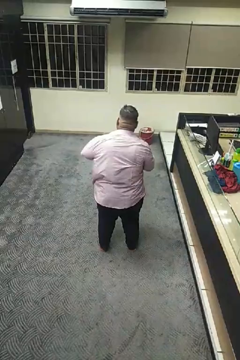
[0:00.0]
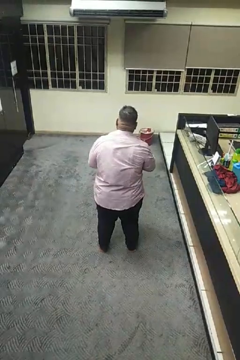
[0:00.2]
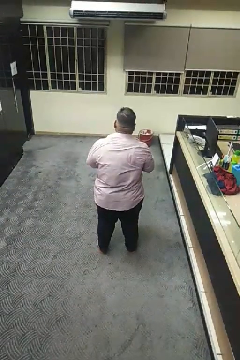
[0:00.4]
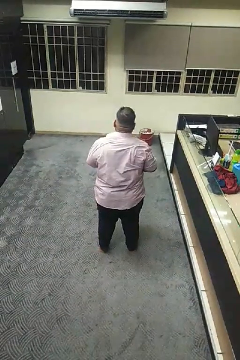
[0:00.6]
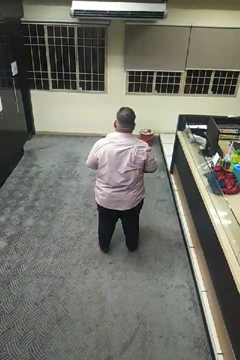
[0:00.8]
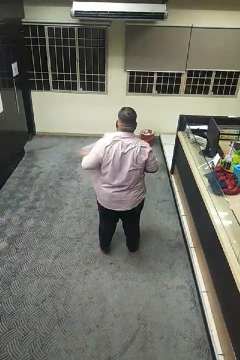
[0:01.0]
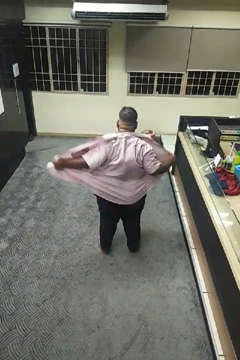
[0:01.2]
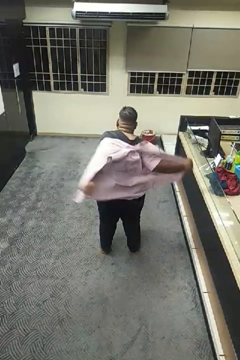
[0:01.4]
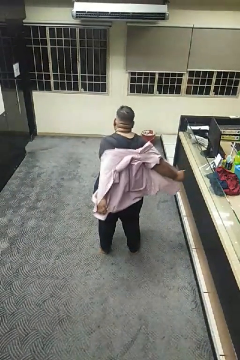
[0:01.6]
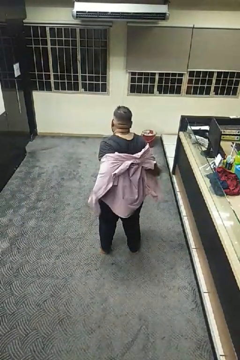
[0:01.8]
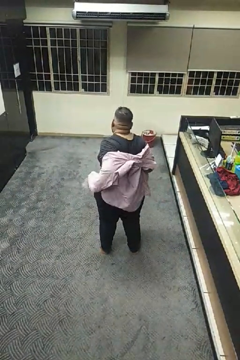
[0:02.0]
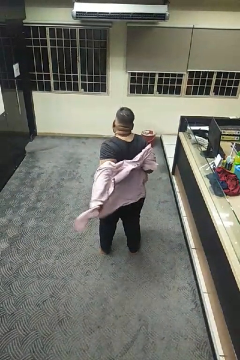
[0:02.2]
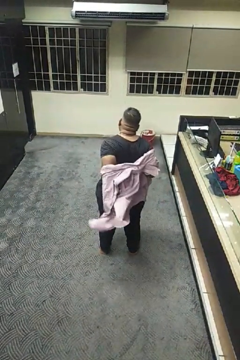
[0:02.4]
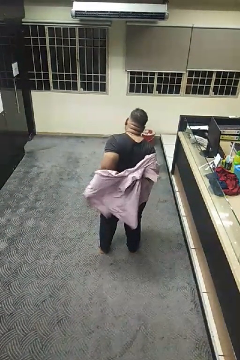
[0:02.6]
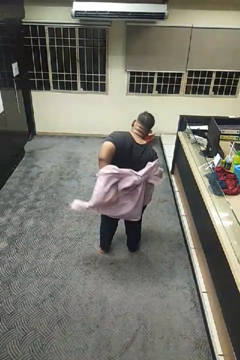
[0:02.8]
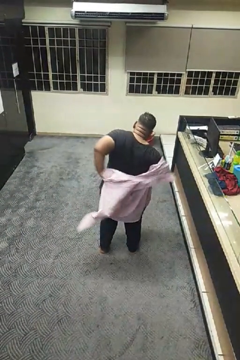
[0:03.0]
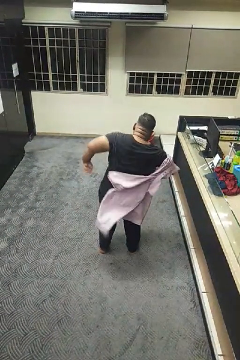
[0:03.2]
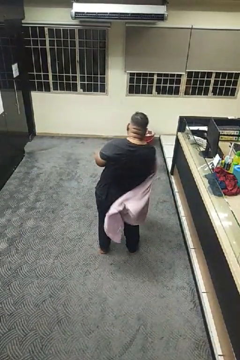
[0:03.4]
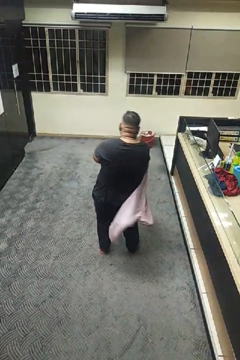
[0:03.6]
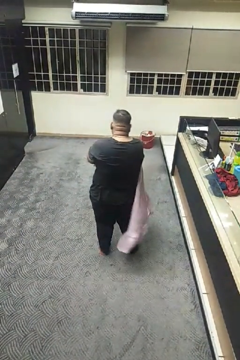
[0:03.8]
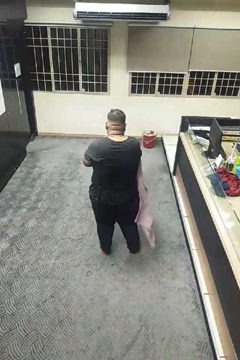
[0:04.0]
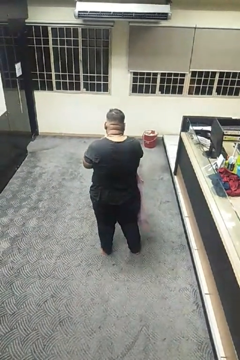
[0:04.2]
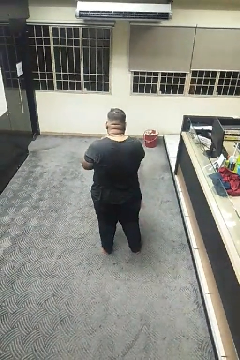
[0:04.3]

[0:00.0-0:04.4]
person takes off shirt

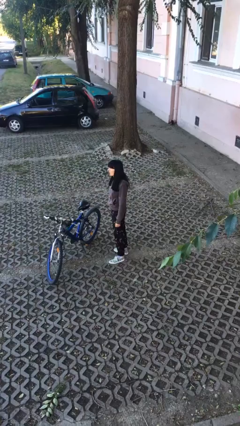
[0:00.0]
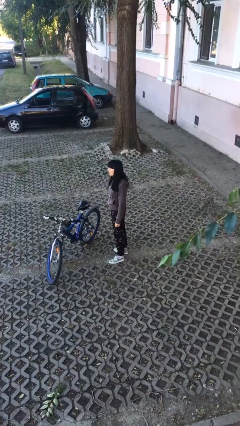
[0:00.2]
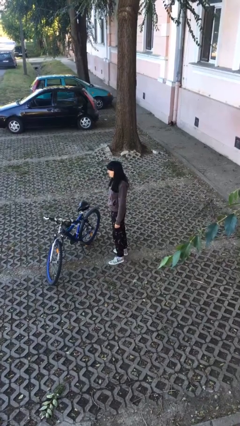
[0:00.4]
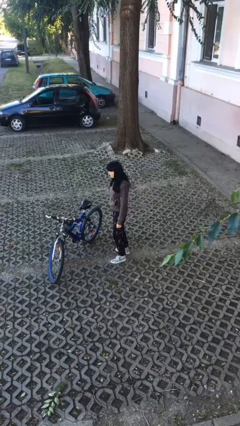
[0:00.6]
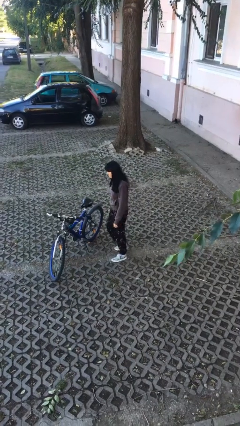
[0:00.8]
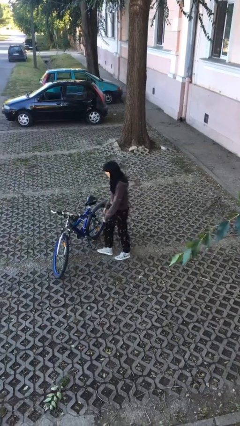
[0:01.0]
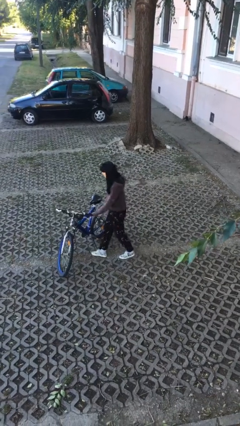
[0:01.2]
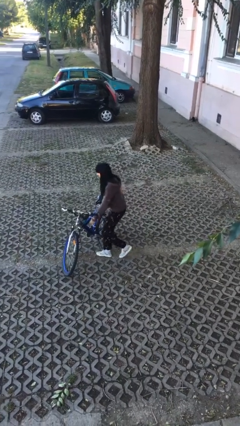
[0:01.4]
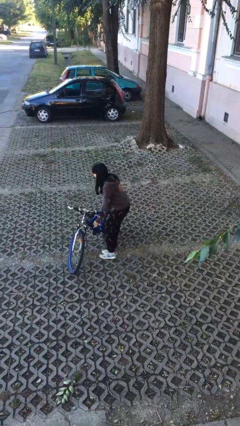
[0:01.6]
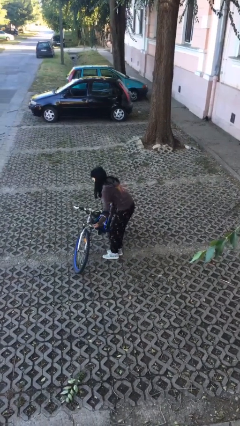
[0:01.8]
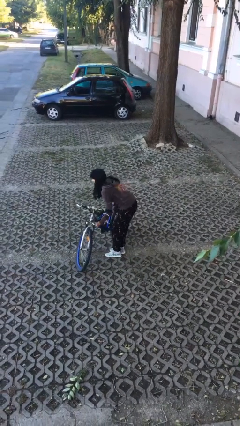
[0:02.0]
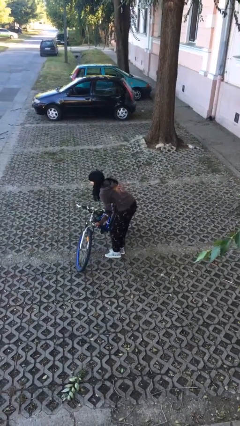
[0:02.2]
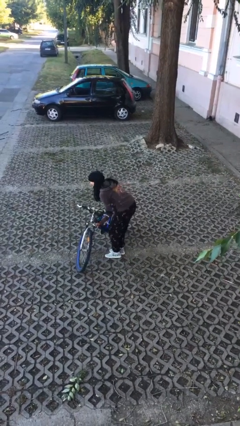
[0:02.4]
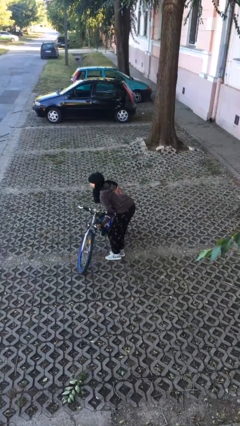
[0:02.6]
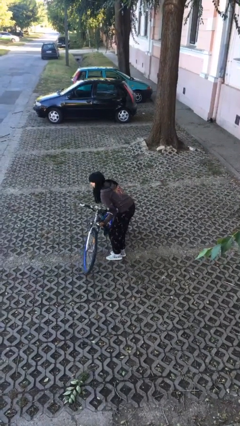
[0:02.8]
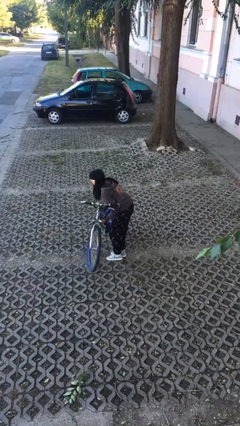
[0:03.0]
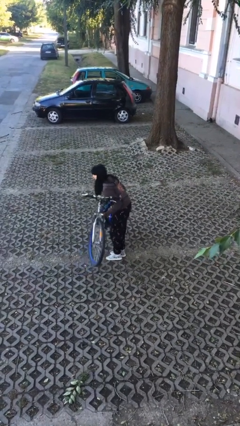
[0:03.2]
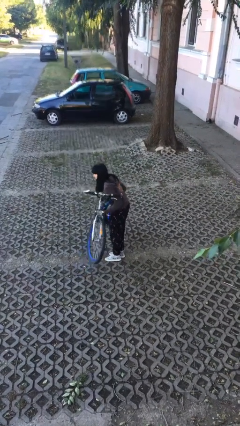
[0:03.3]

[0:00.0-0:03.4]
person picks up object from floor

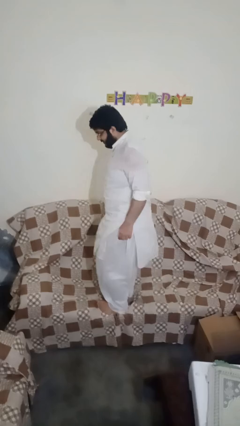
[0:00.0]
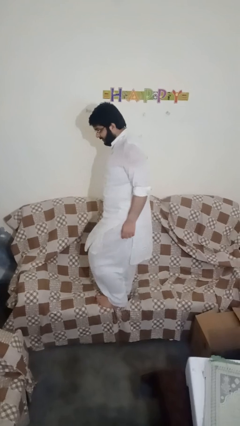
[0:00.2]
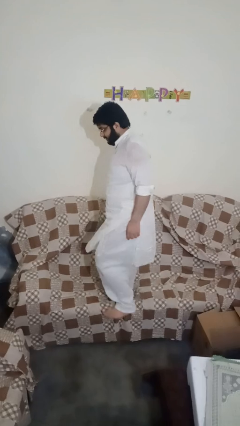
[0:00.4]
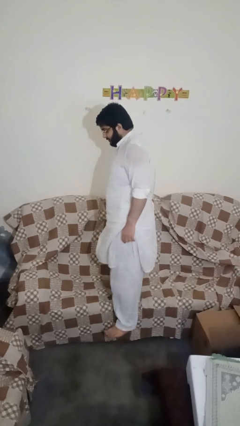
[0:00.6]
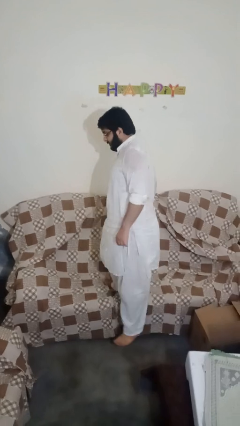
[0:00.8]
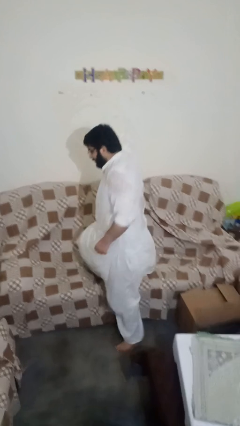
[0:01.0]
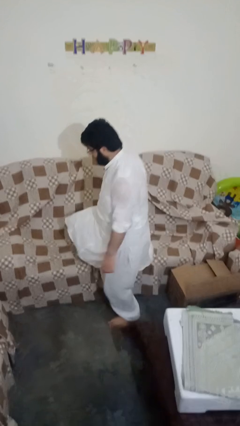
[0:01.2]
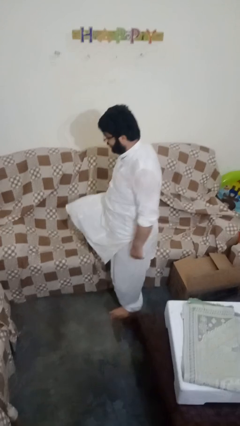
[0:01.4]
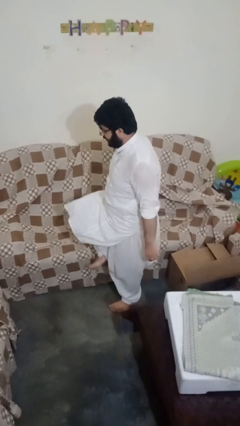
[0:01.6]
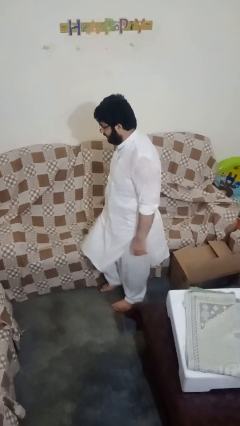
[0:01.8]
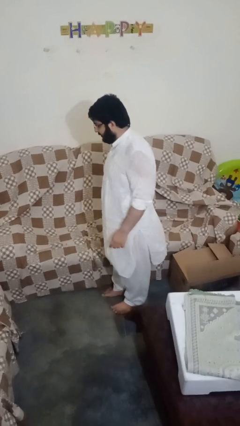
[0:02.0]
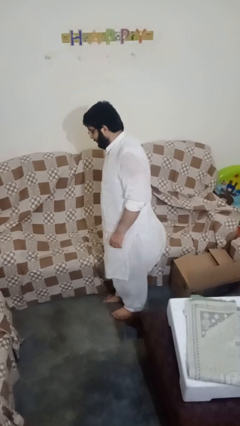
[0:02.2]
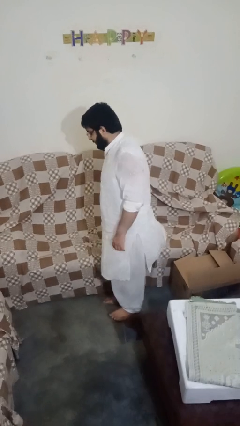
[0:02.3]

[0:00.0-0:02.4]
person climbs off couch

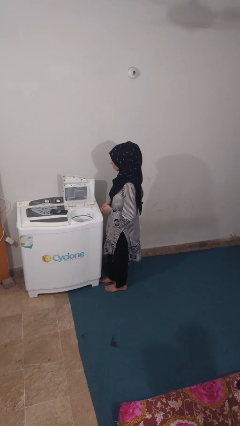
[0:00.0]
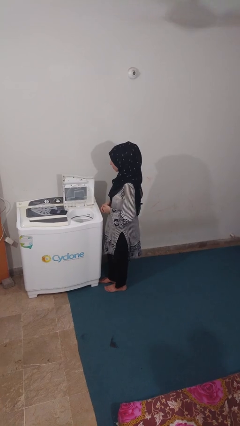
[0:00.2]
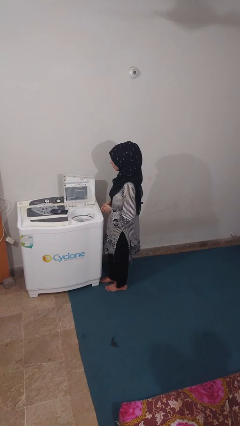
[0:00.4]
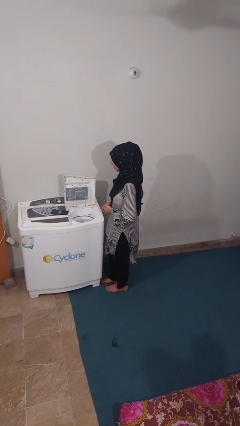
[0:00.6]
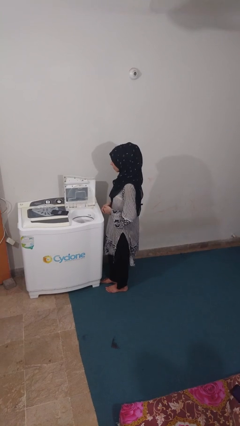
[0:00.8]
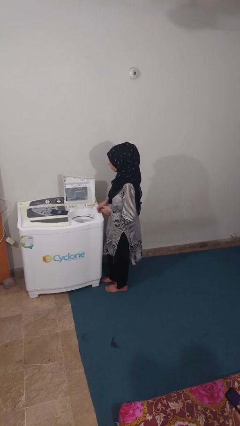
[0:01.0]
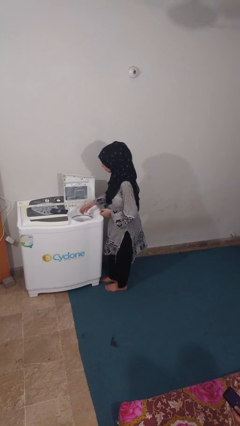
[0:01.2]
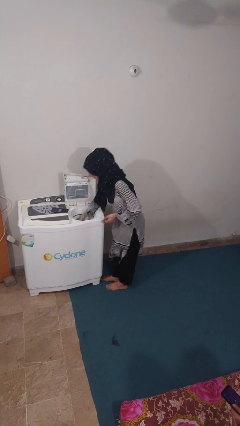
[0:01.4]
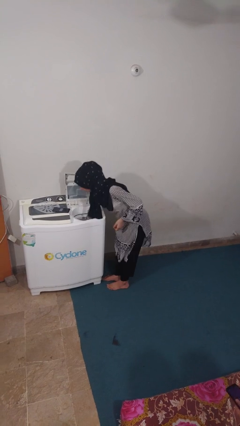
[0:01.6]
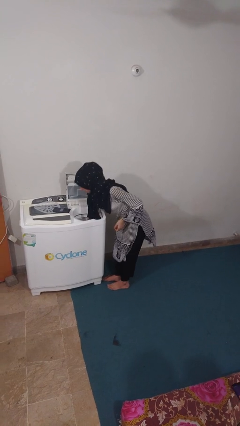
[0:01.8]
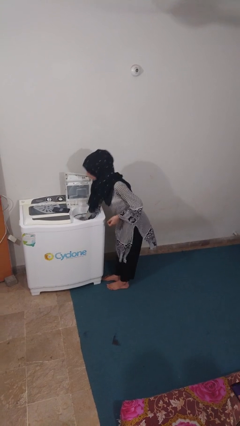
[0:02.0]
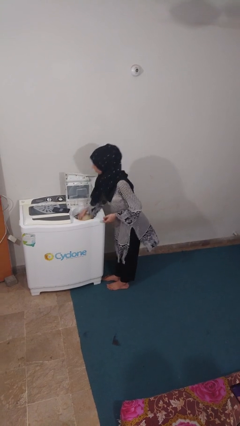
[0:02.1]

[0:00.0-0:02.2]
person unloads dryer

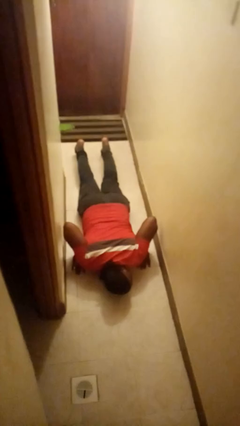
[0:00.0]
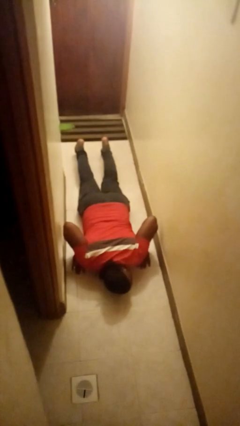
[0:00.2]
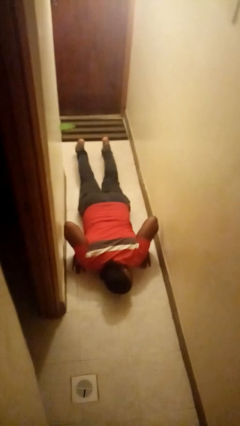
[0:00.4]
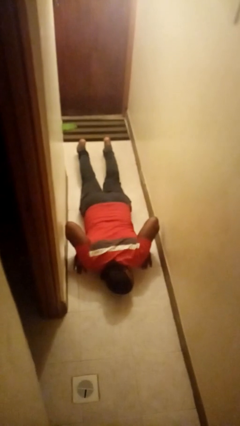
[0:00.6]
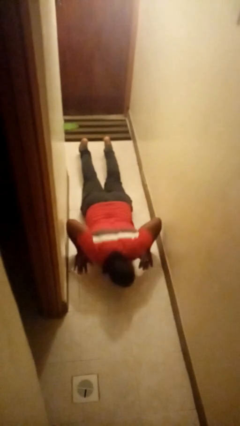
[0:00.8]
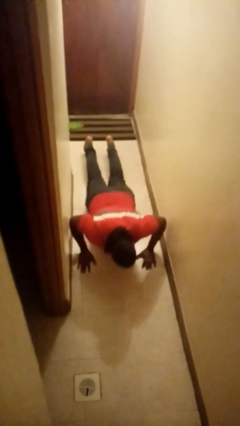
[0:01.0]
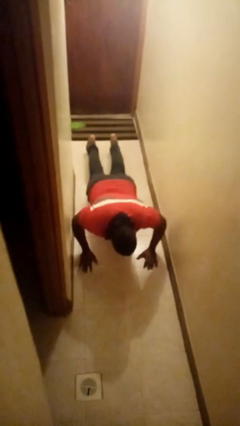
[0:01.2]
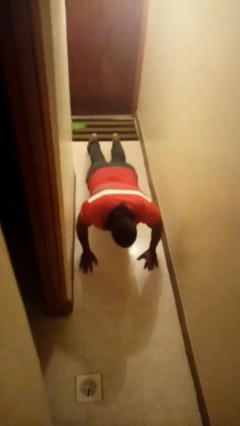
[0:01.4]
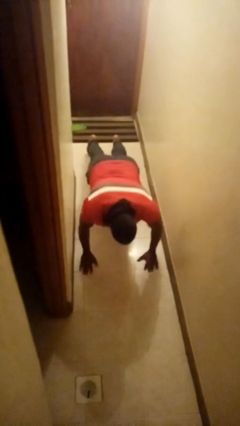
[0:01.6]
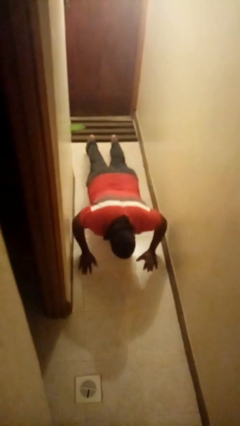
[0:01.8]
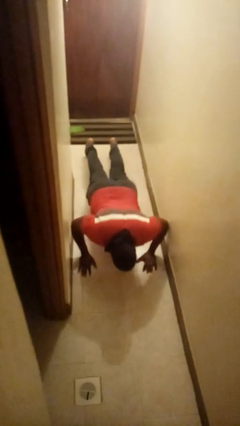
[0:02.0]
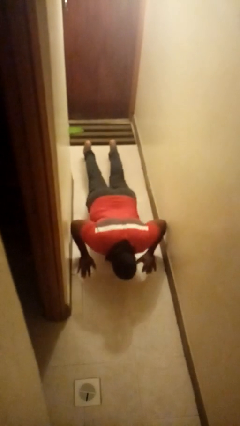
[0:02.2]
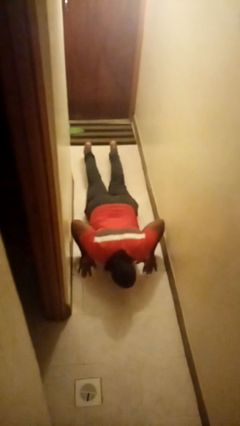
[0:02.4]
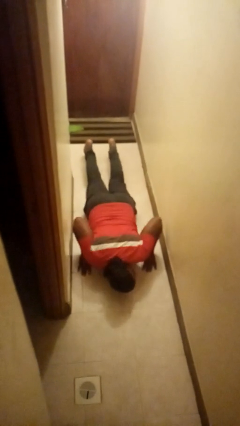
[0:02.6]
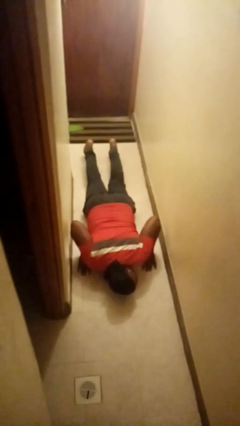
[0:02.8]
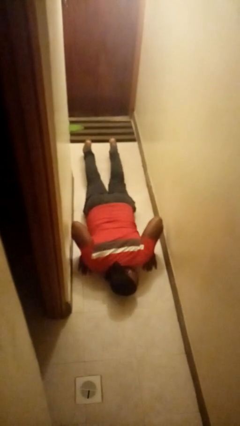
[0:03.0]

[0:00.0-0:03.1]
person exercises with pushup

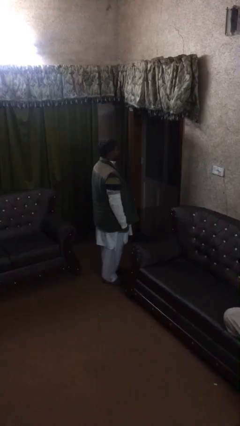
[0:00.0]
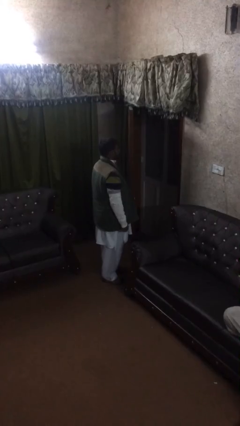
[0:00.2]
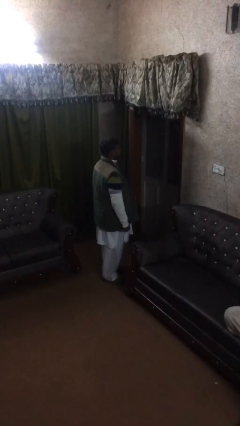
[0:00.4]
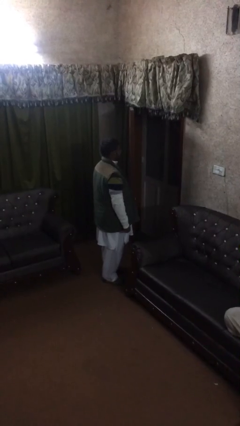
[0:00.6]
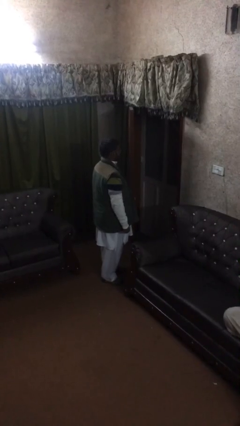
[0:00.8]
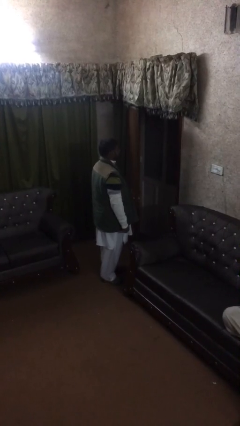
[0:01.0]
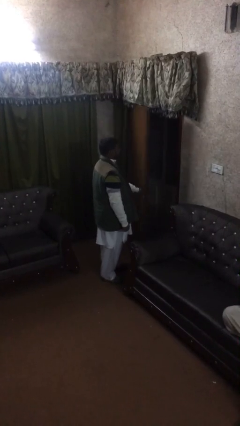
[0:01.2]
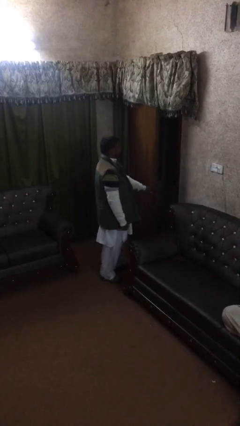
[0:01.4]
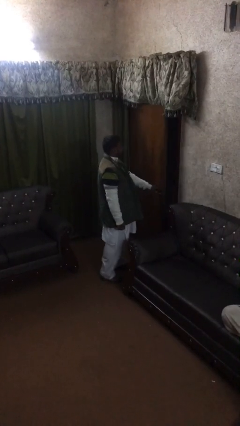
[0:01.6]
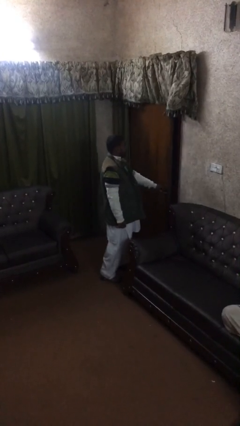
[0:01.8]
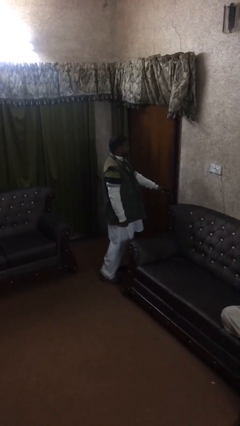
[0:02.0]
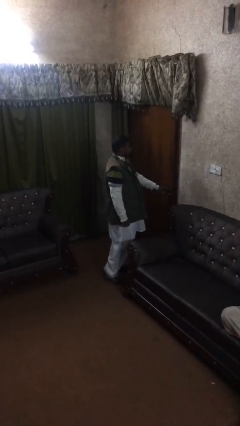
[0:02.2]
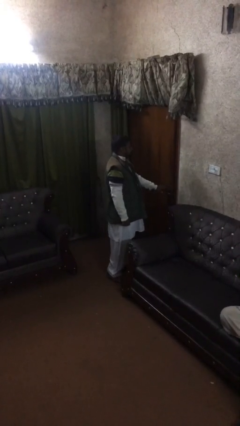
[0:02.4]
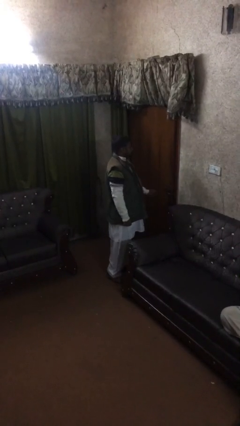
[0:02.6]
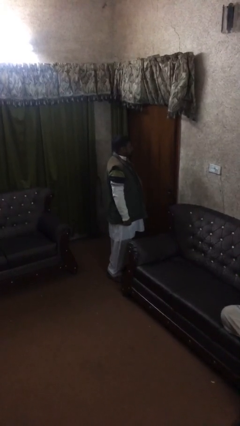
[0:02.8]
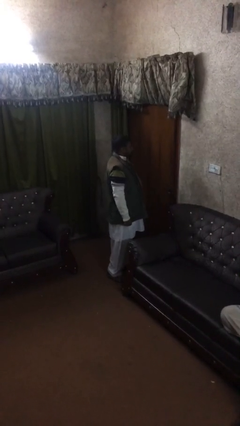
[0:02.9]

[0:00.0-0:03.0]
person closes facility door
